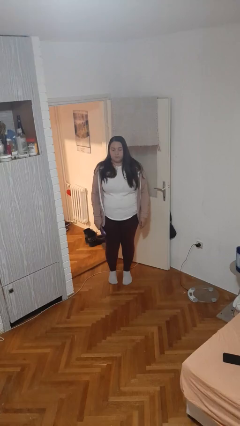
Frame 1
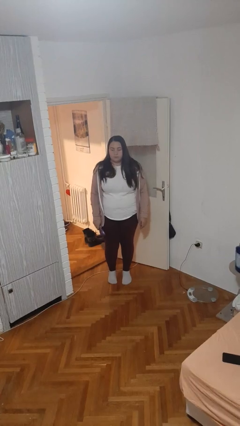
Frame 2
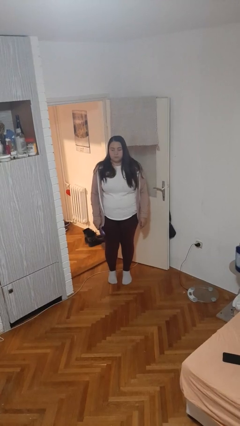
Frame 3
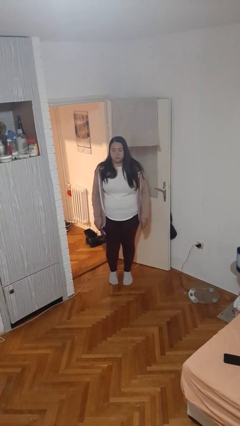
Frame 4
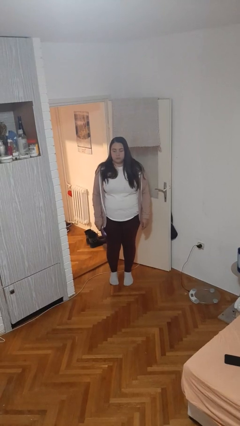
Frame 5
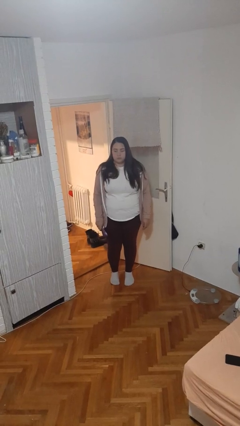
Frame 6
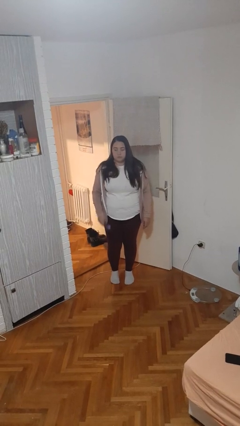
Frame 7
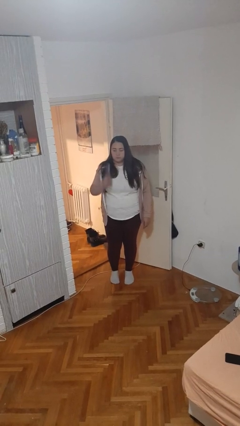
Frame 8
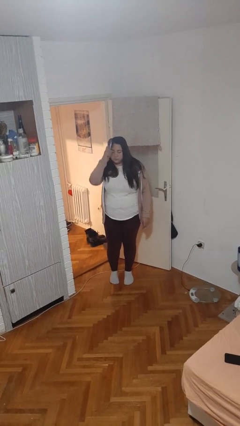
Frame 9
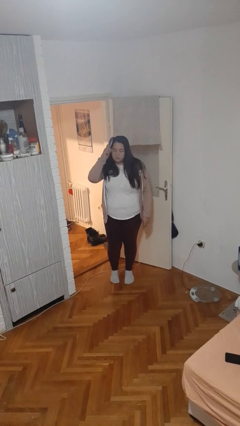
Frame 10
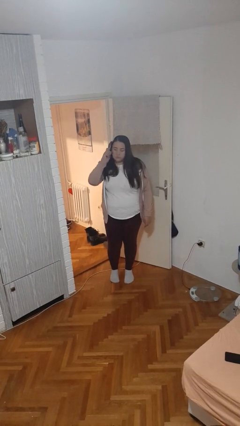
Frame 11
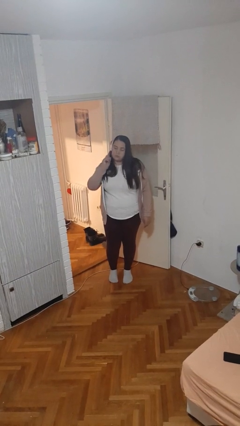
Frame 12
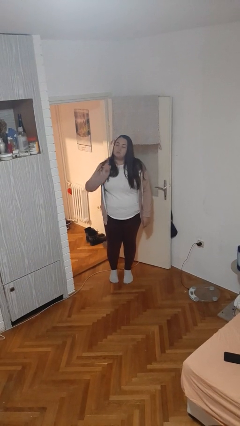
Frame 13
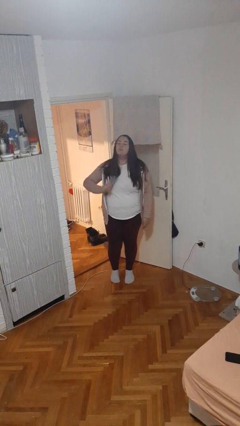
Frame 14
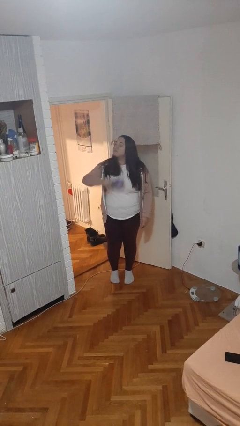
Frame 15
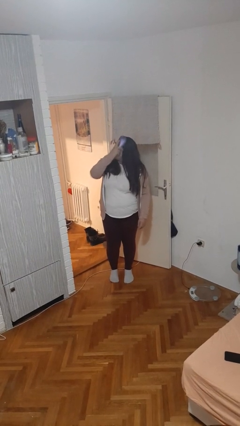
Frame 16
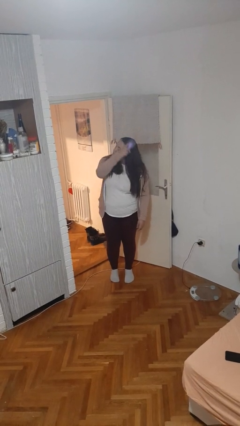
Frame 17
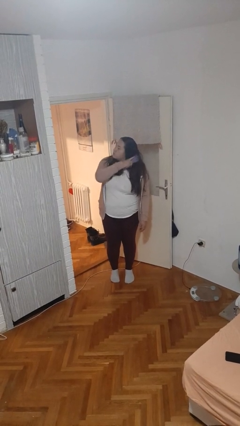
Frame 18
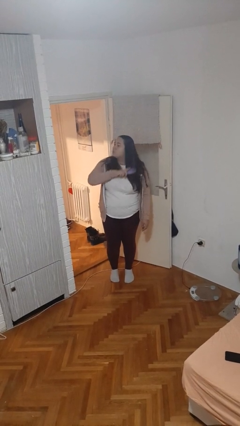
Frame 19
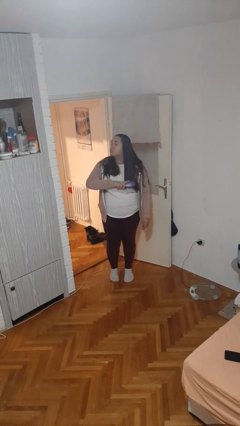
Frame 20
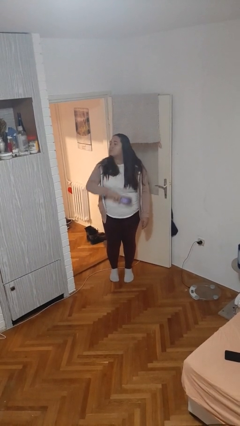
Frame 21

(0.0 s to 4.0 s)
person brushes hair

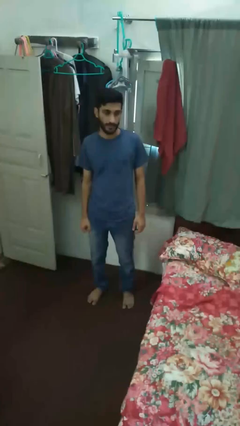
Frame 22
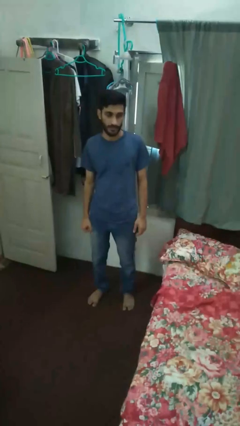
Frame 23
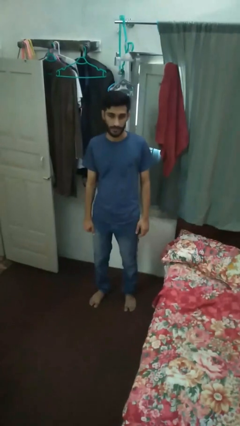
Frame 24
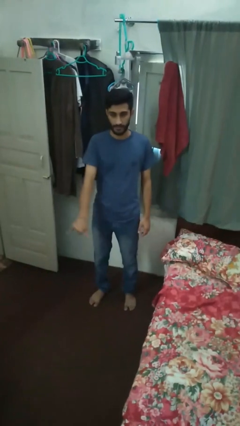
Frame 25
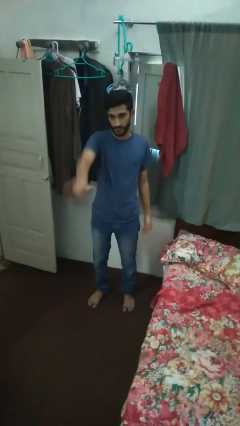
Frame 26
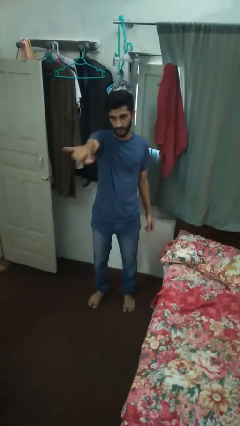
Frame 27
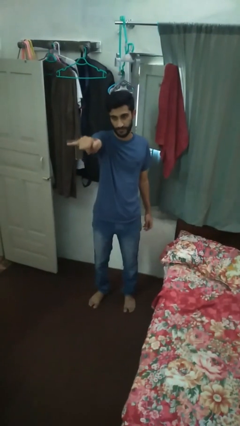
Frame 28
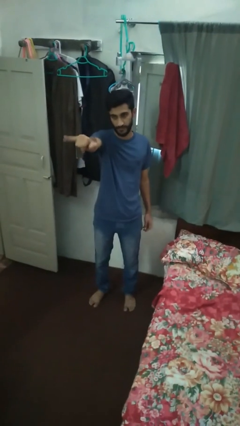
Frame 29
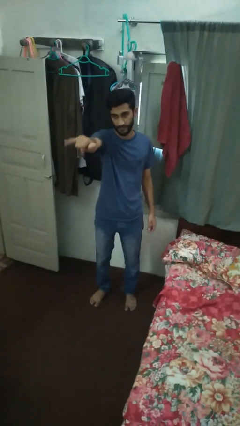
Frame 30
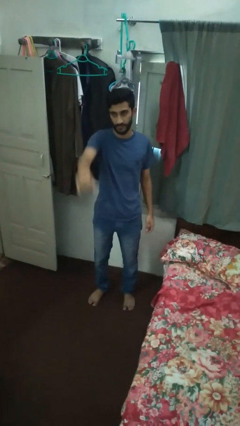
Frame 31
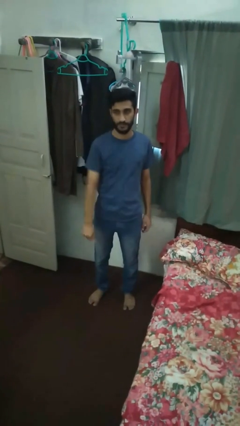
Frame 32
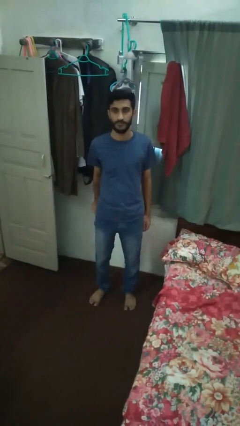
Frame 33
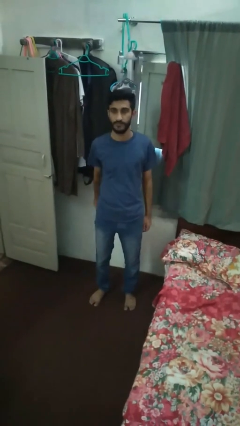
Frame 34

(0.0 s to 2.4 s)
person gestures hang loose

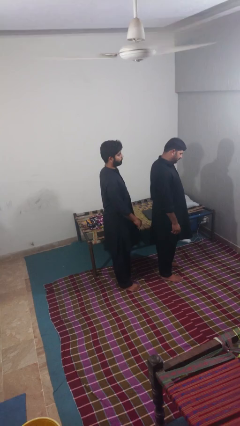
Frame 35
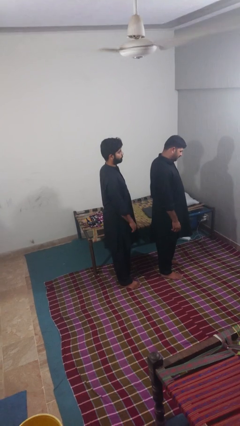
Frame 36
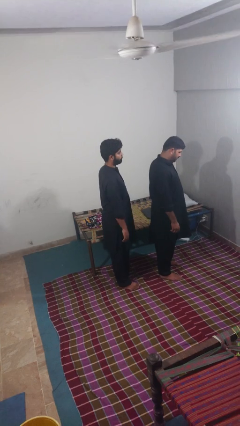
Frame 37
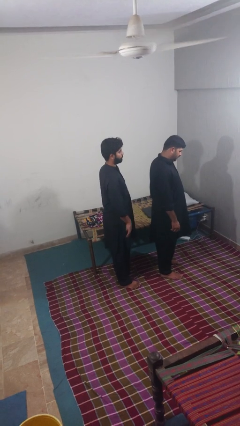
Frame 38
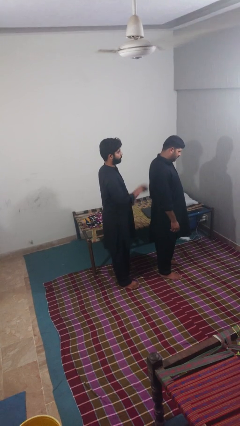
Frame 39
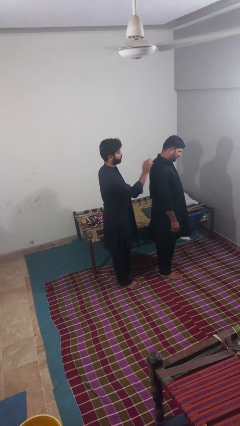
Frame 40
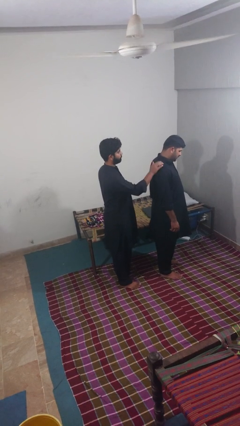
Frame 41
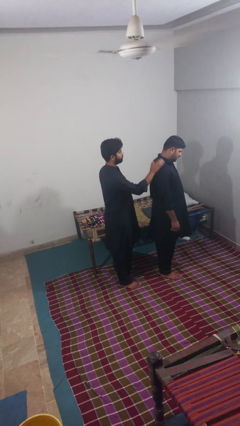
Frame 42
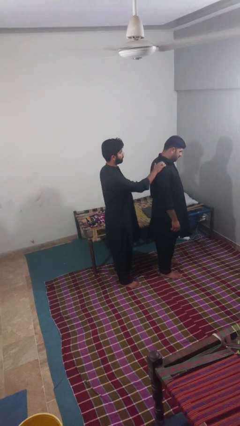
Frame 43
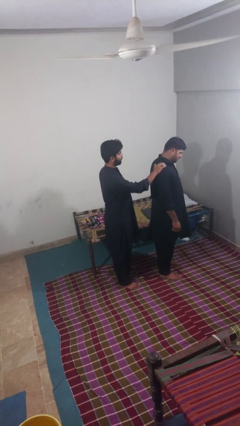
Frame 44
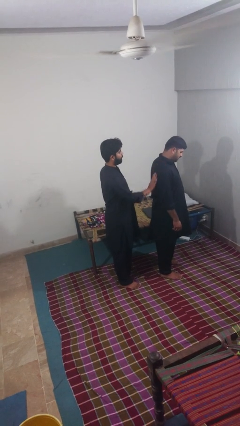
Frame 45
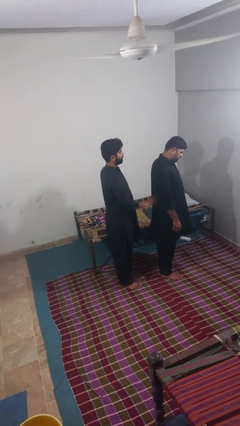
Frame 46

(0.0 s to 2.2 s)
person touches back of person

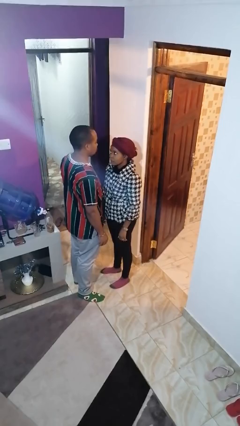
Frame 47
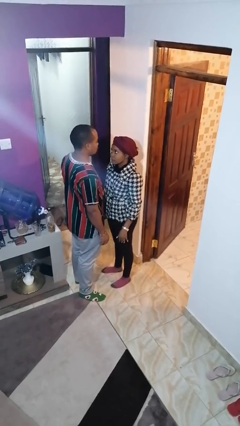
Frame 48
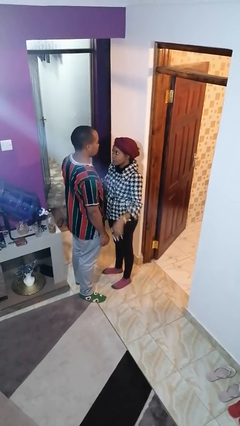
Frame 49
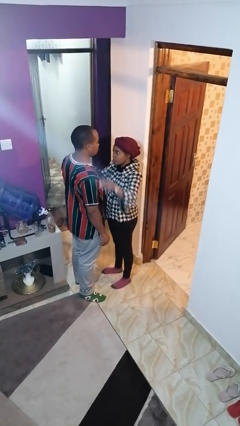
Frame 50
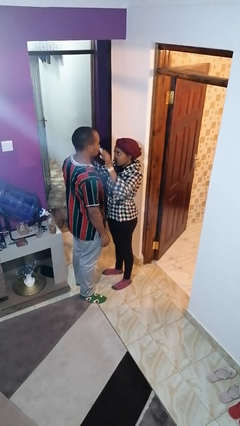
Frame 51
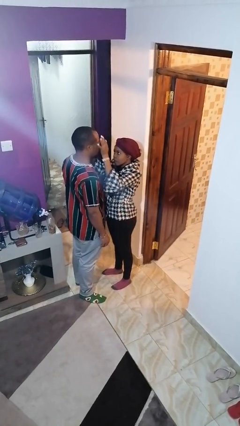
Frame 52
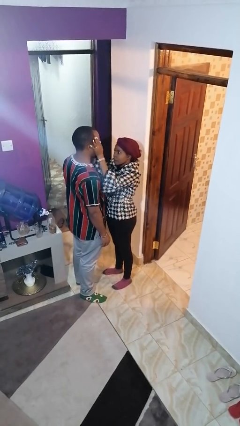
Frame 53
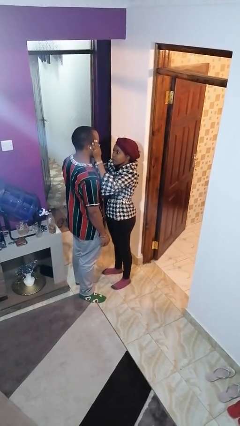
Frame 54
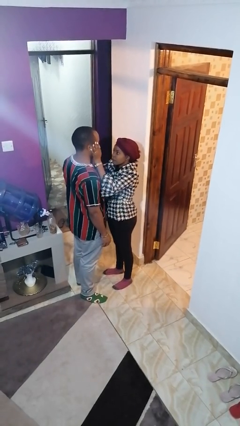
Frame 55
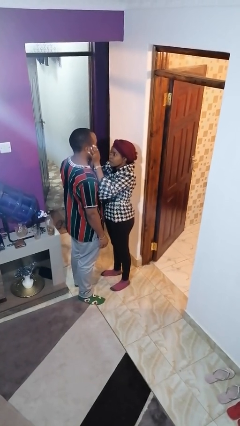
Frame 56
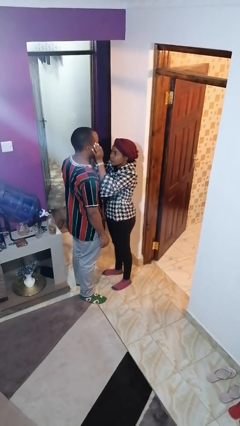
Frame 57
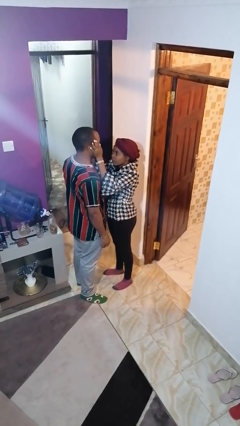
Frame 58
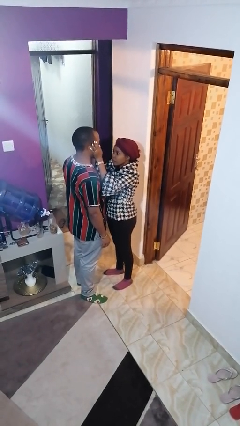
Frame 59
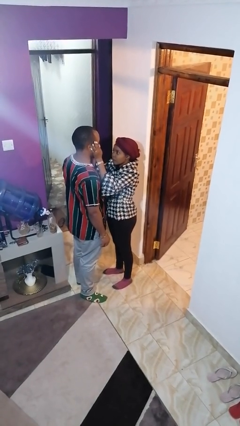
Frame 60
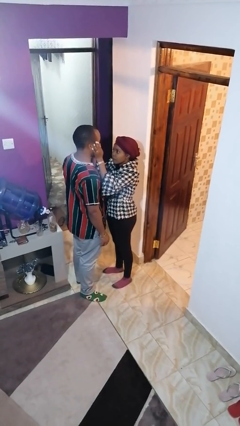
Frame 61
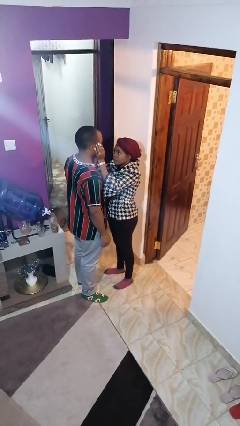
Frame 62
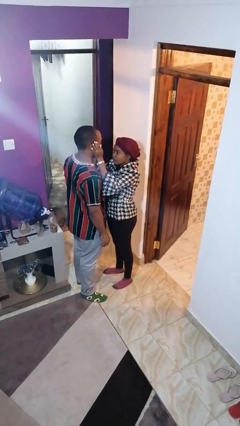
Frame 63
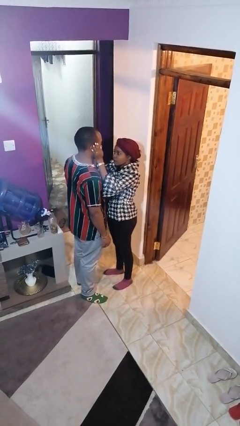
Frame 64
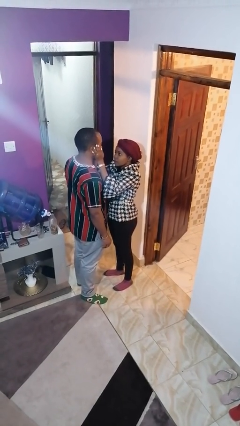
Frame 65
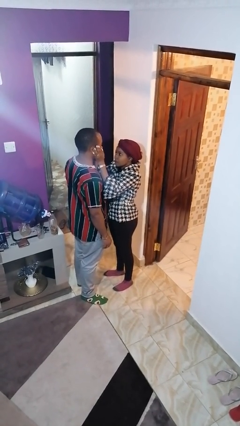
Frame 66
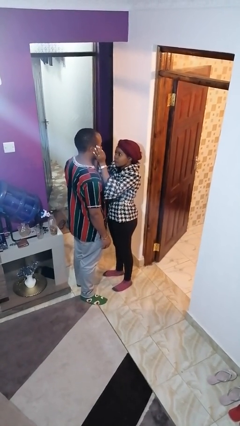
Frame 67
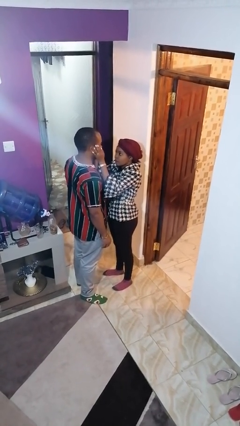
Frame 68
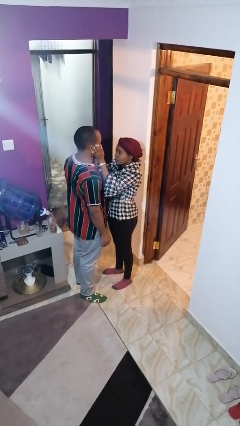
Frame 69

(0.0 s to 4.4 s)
person touches face of person

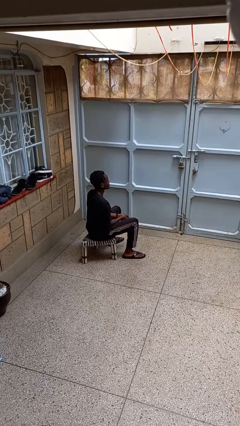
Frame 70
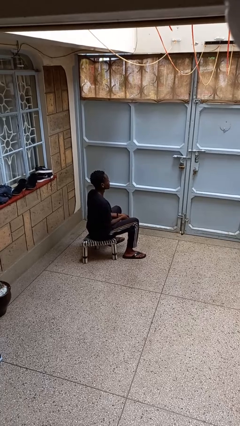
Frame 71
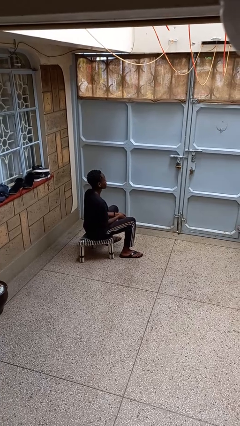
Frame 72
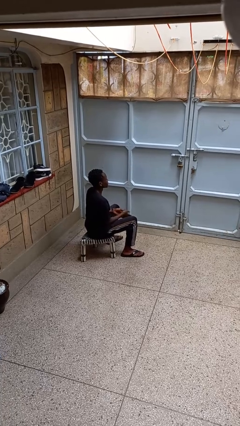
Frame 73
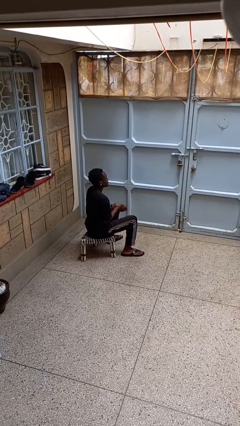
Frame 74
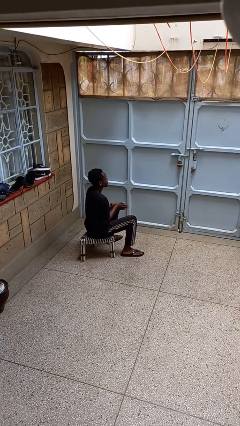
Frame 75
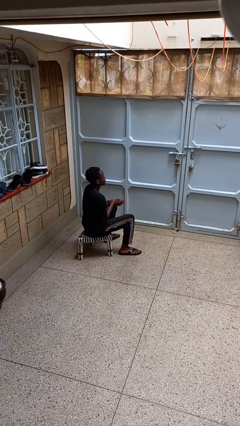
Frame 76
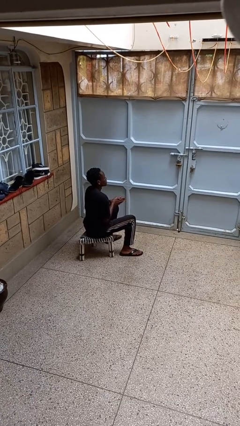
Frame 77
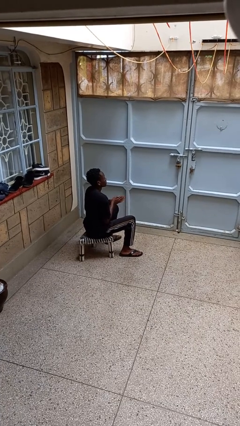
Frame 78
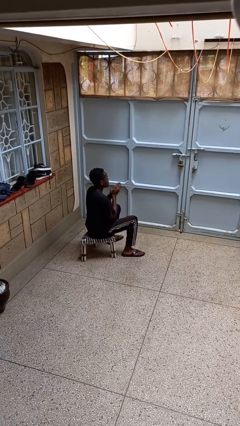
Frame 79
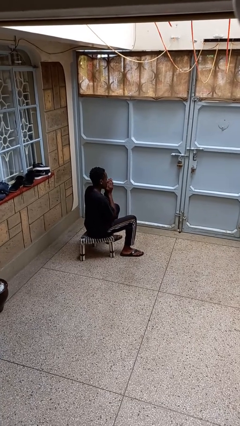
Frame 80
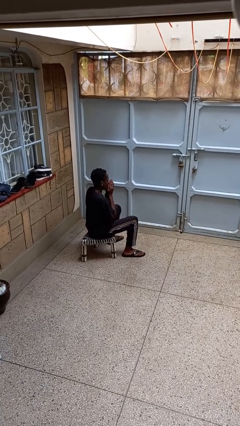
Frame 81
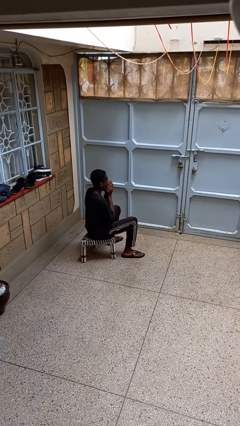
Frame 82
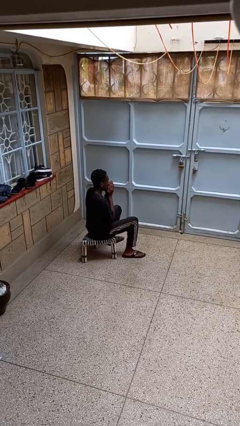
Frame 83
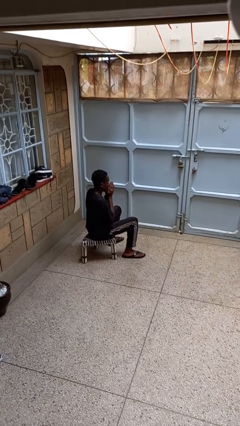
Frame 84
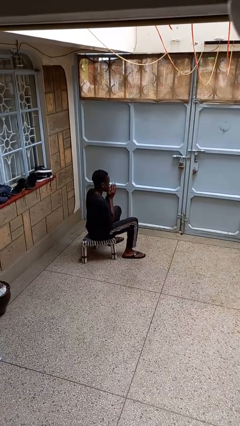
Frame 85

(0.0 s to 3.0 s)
person blows into hands

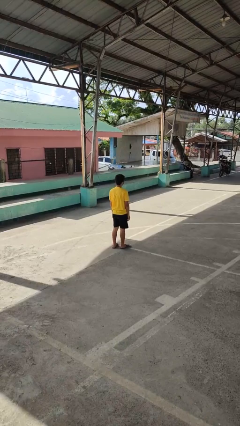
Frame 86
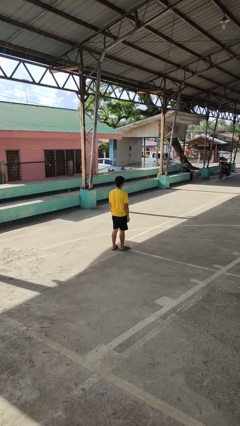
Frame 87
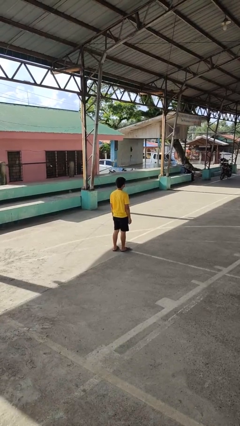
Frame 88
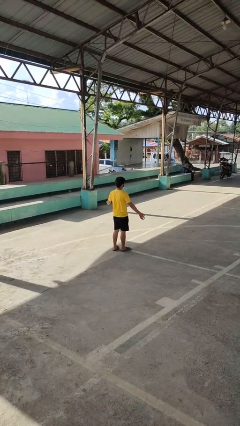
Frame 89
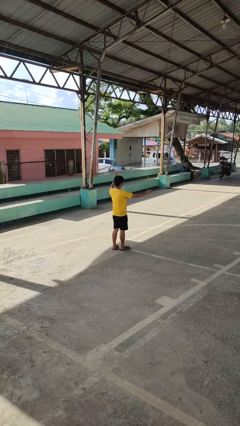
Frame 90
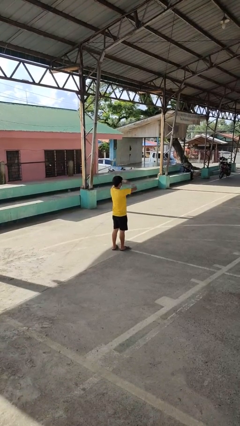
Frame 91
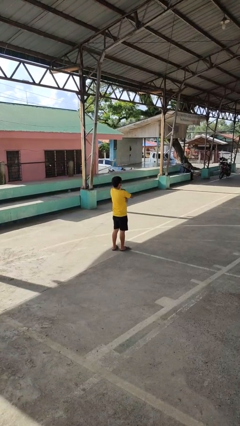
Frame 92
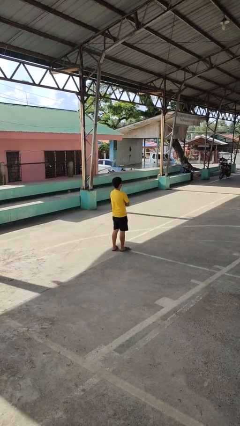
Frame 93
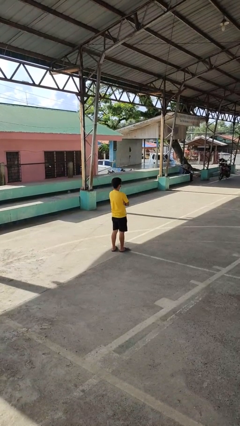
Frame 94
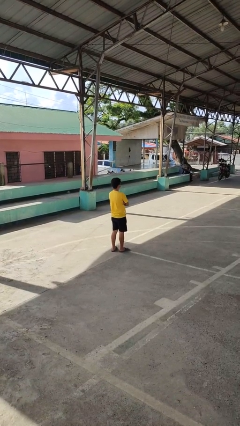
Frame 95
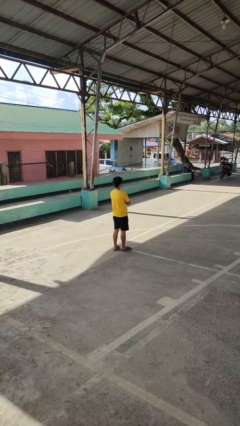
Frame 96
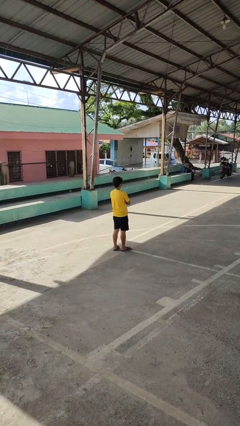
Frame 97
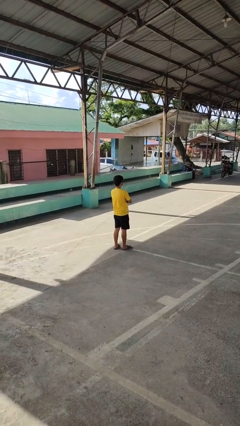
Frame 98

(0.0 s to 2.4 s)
person crosses arms
